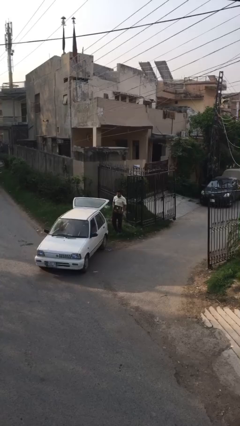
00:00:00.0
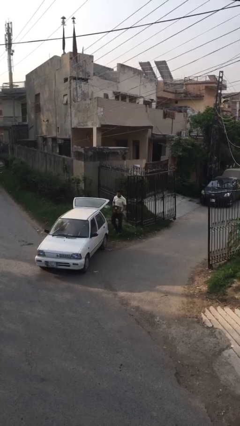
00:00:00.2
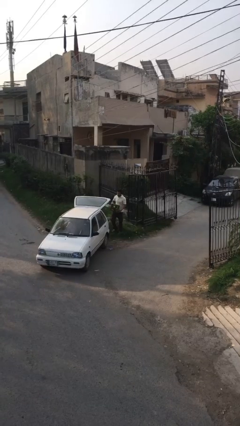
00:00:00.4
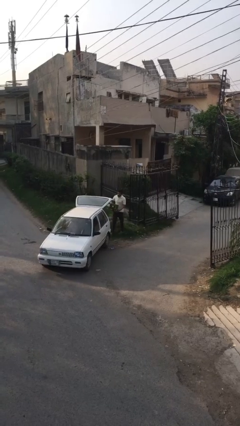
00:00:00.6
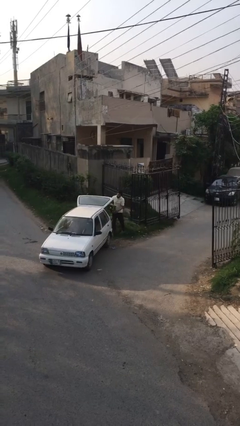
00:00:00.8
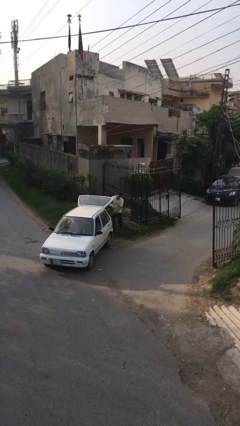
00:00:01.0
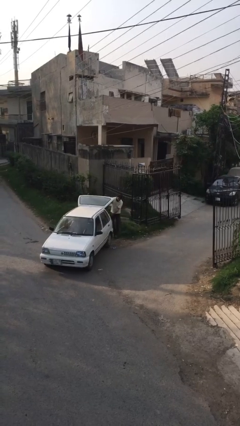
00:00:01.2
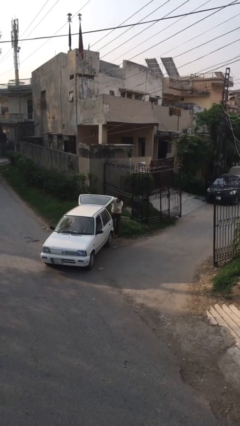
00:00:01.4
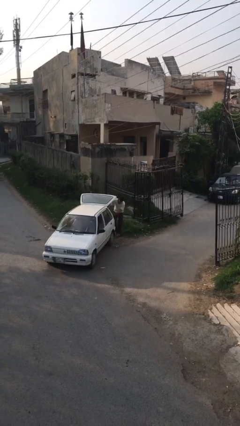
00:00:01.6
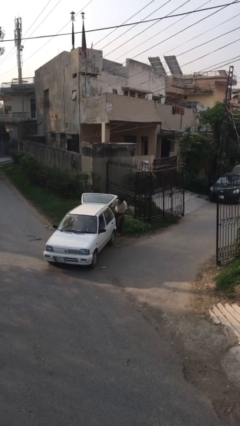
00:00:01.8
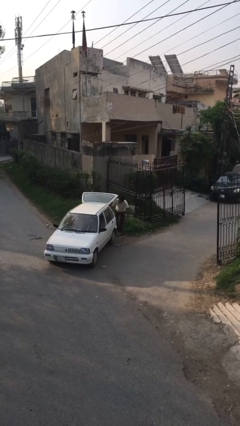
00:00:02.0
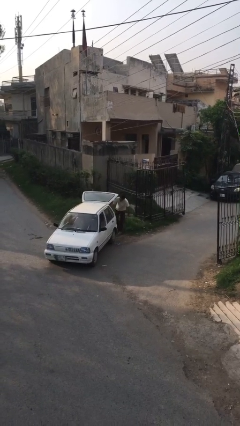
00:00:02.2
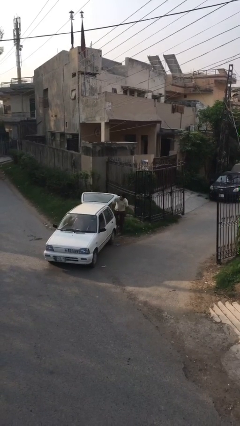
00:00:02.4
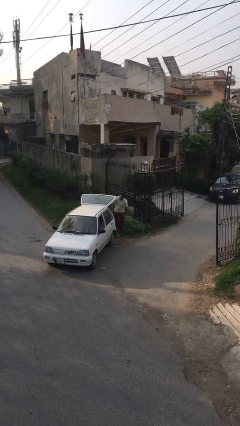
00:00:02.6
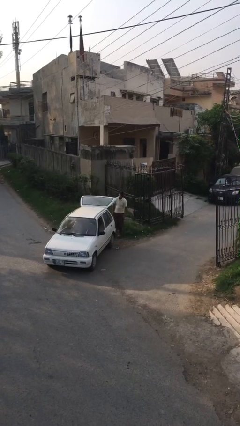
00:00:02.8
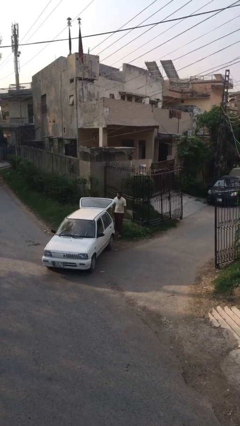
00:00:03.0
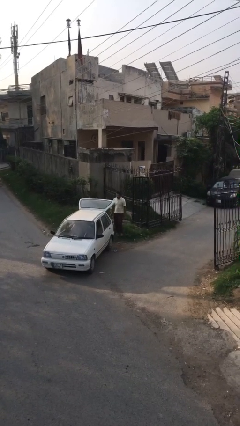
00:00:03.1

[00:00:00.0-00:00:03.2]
person loads car

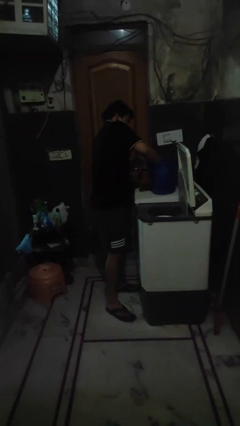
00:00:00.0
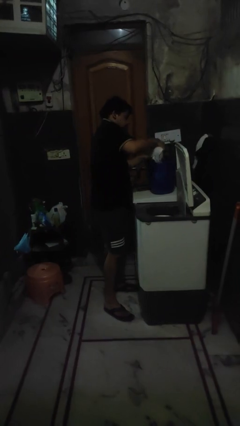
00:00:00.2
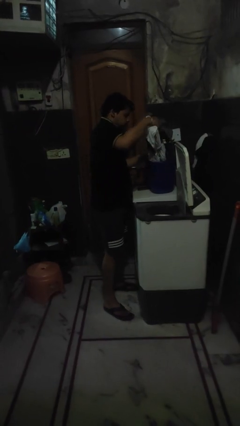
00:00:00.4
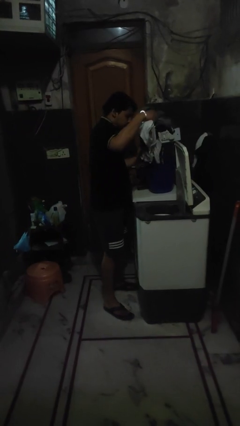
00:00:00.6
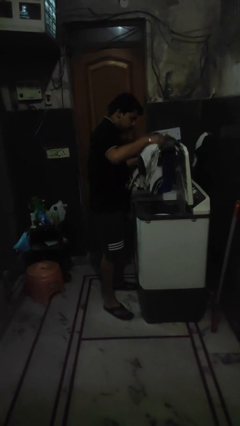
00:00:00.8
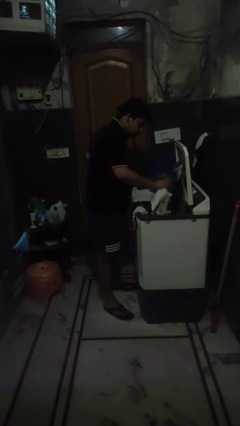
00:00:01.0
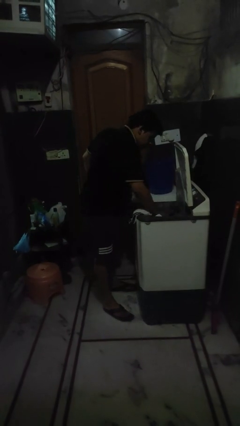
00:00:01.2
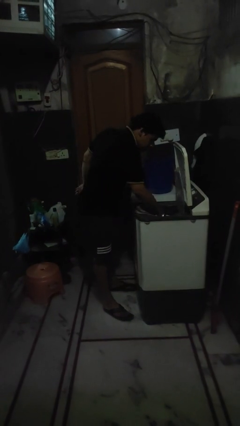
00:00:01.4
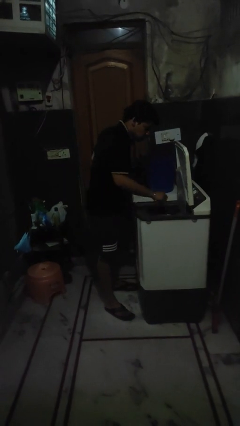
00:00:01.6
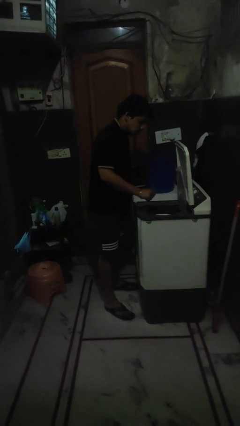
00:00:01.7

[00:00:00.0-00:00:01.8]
person loads clotheswasher

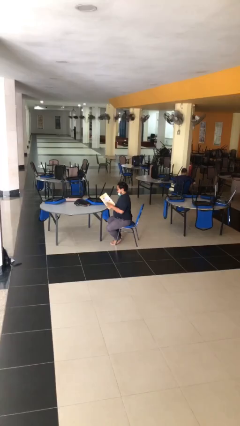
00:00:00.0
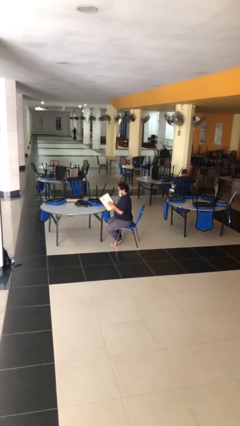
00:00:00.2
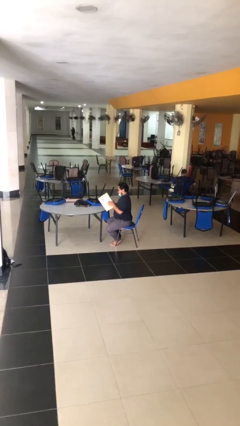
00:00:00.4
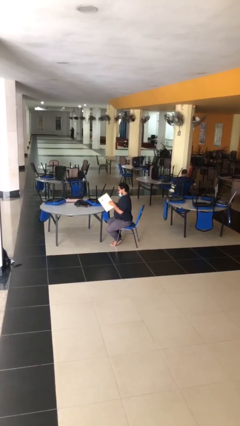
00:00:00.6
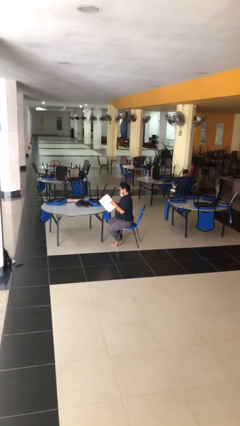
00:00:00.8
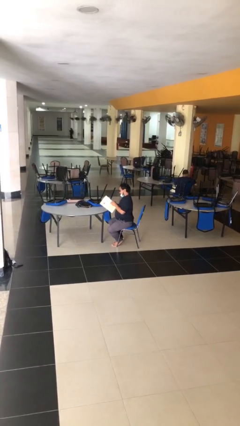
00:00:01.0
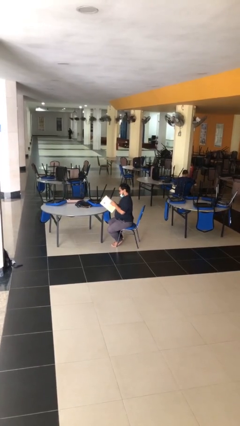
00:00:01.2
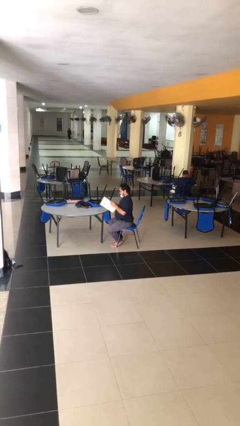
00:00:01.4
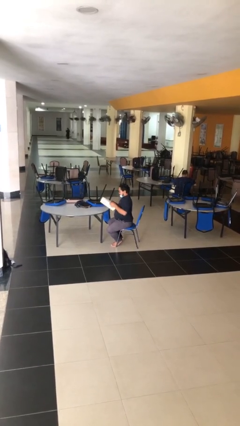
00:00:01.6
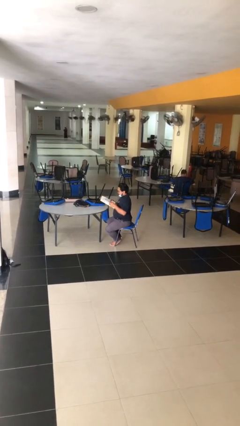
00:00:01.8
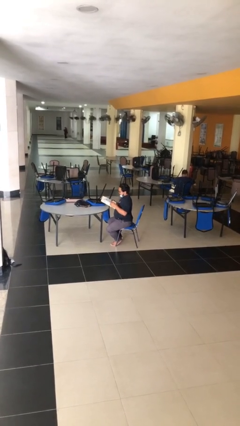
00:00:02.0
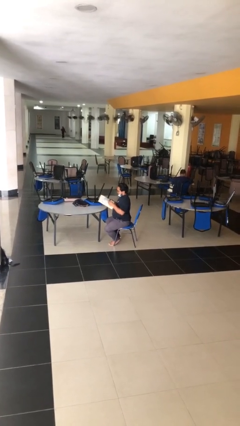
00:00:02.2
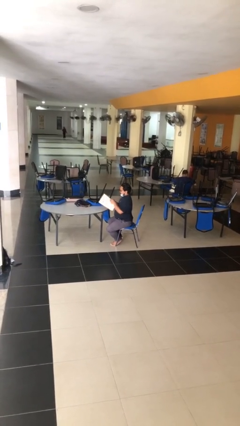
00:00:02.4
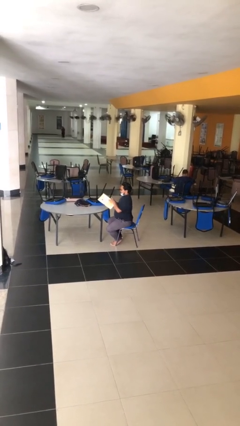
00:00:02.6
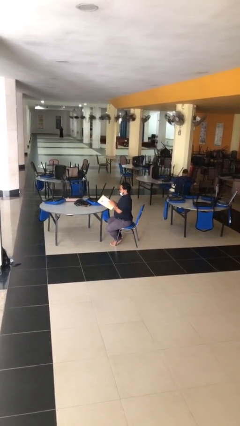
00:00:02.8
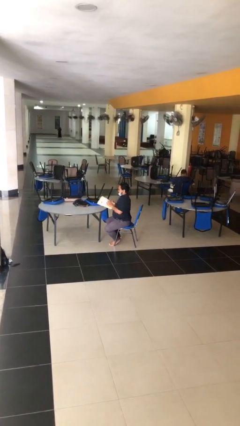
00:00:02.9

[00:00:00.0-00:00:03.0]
person reads document

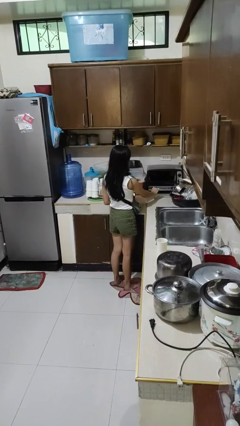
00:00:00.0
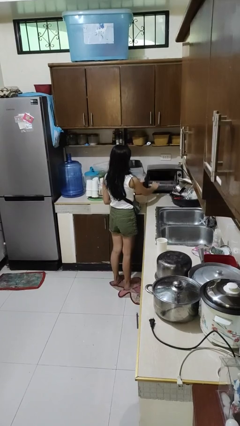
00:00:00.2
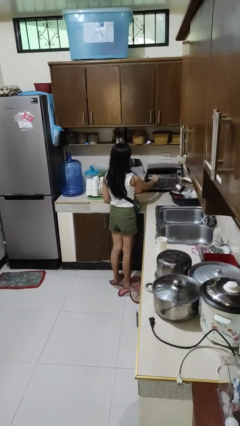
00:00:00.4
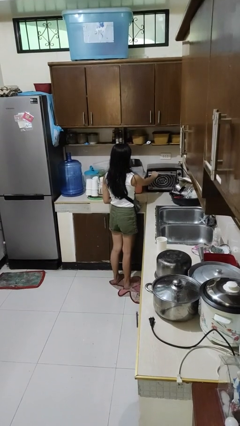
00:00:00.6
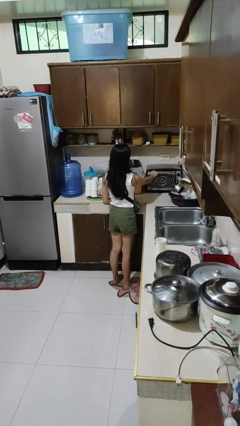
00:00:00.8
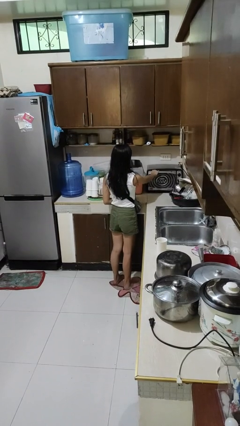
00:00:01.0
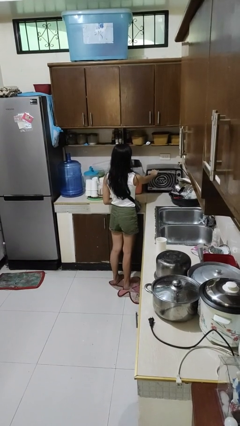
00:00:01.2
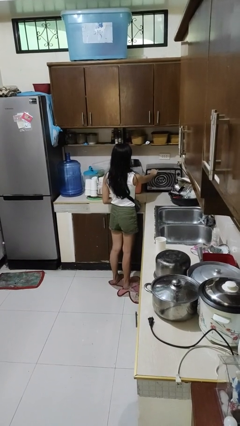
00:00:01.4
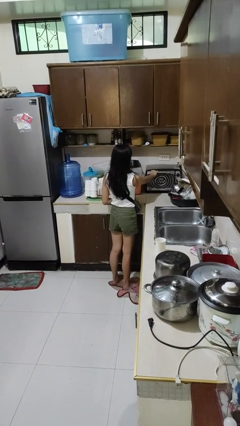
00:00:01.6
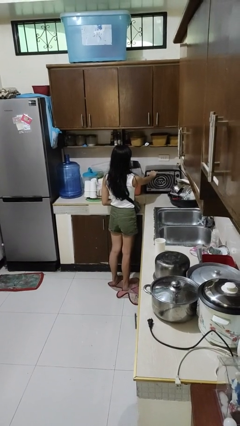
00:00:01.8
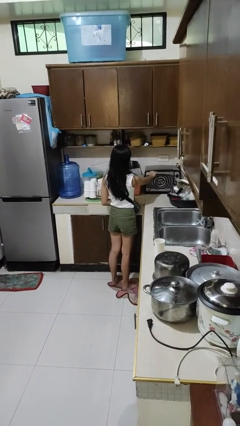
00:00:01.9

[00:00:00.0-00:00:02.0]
person closes microwave

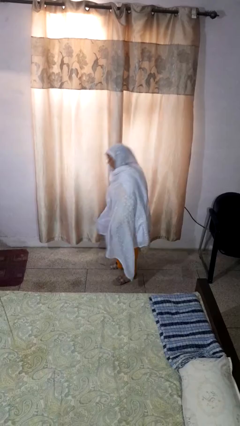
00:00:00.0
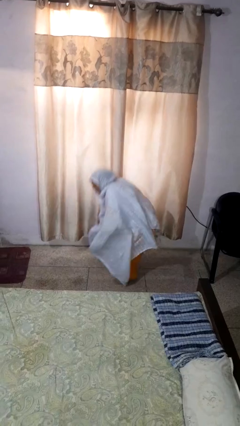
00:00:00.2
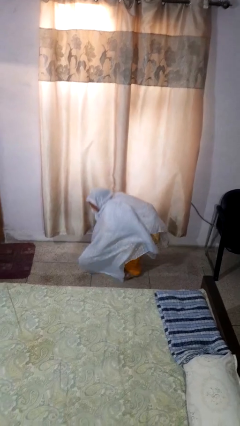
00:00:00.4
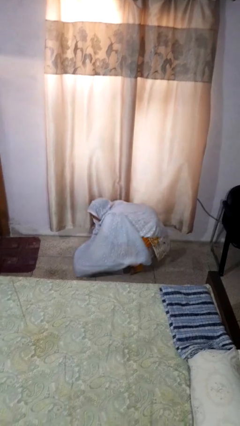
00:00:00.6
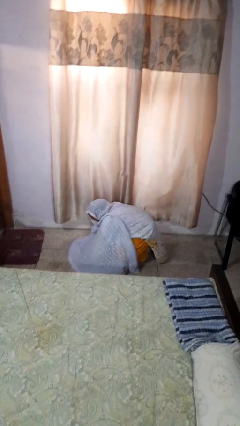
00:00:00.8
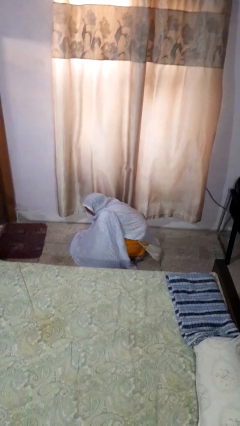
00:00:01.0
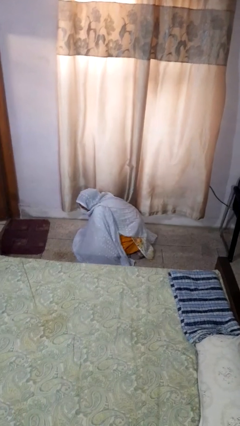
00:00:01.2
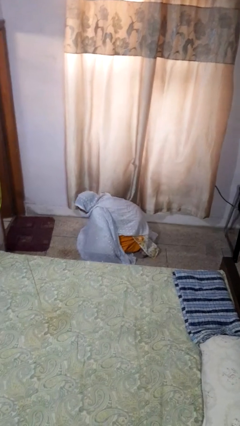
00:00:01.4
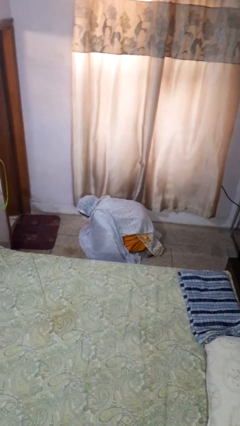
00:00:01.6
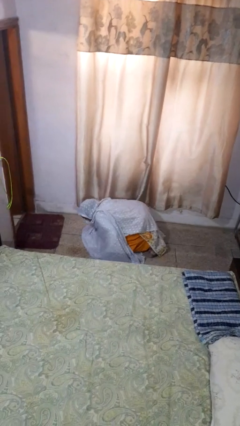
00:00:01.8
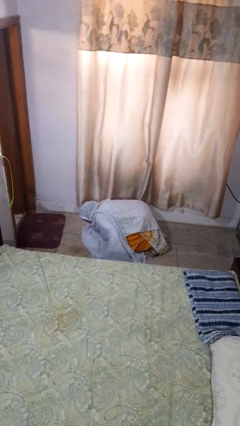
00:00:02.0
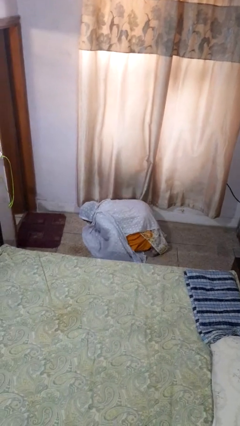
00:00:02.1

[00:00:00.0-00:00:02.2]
person falls while standing

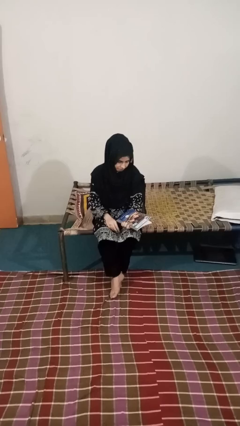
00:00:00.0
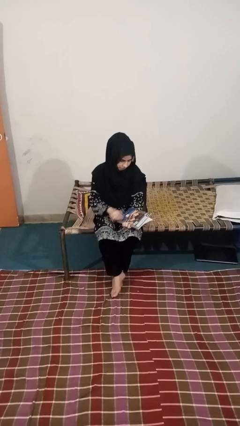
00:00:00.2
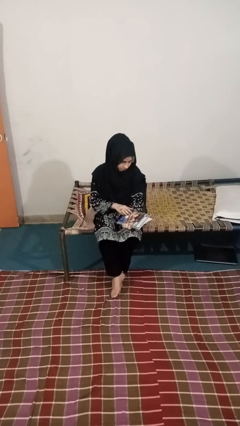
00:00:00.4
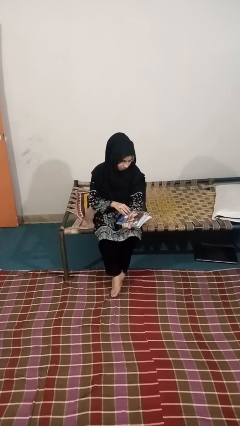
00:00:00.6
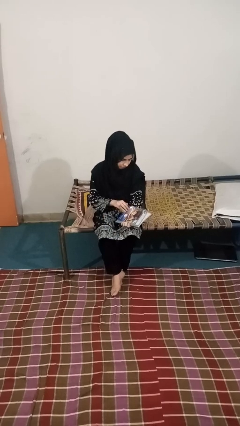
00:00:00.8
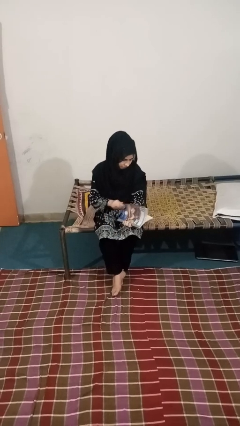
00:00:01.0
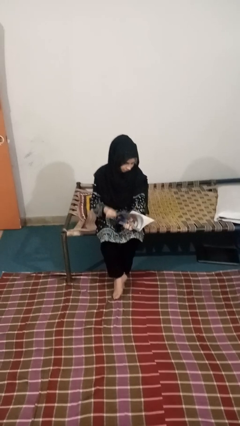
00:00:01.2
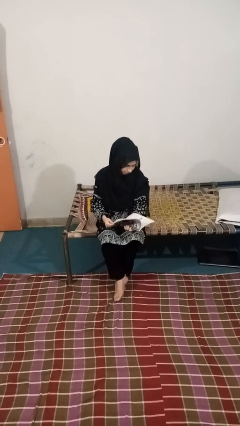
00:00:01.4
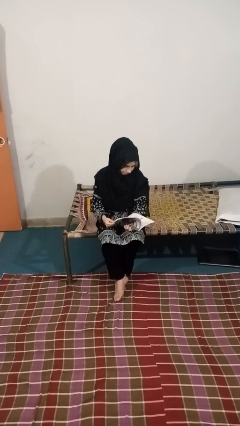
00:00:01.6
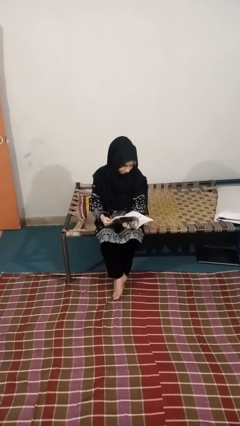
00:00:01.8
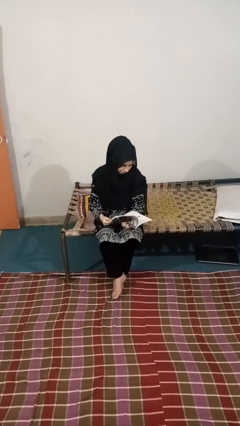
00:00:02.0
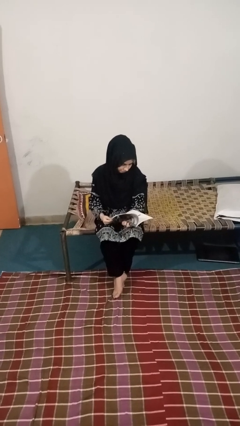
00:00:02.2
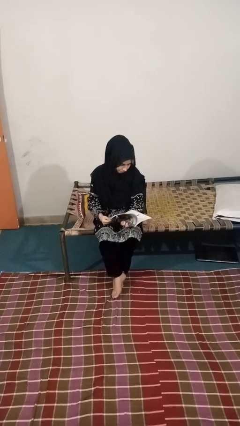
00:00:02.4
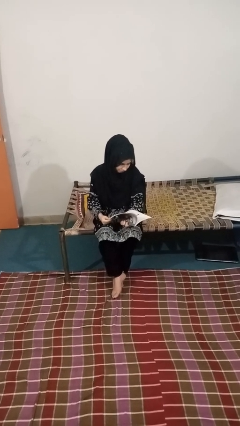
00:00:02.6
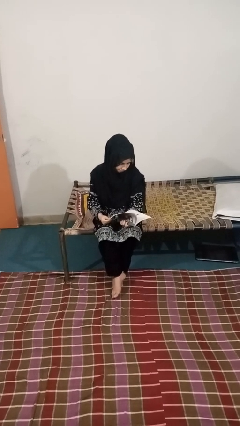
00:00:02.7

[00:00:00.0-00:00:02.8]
person reads book

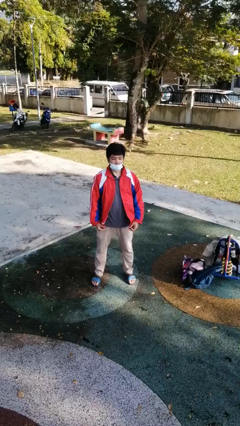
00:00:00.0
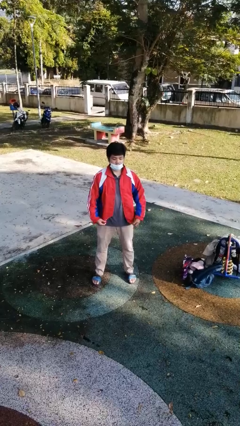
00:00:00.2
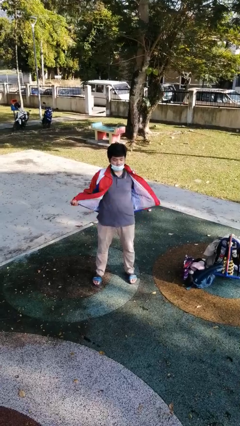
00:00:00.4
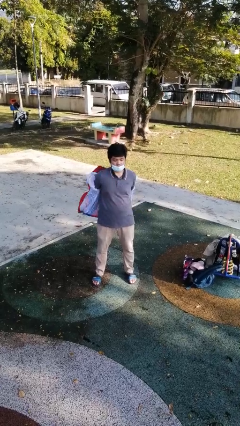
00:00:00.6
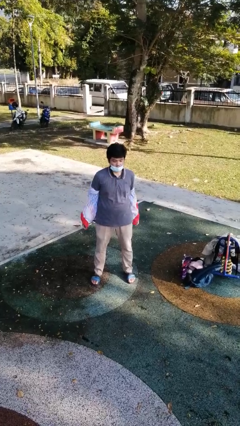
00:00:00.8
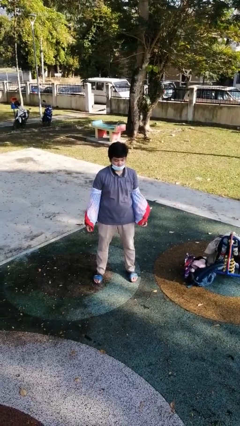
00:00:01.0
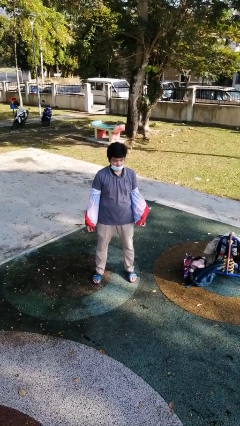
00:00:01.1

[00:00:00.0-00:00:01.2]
person takes off jacket

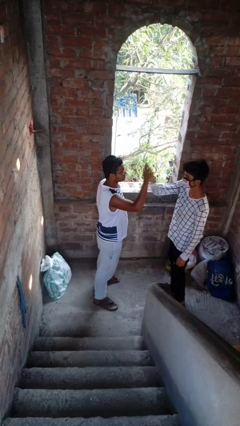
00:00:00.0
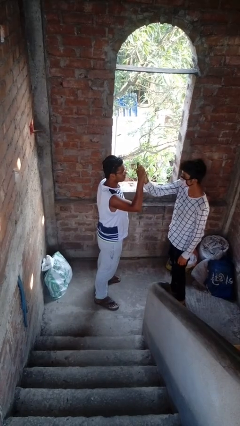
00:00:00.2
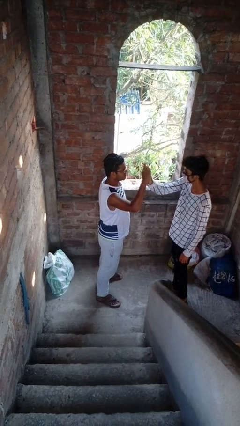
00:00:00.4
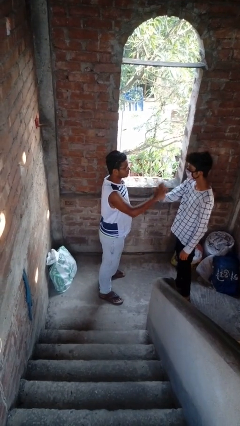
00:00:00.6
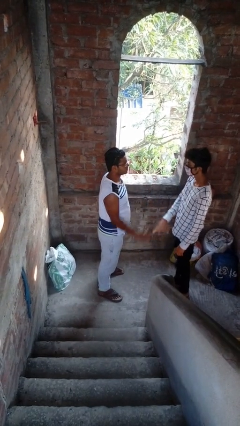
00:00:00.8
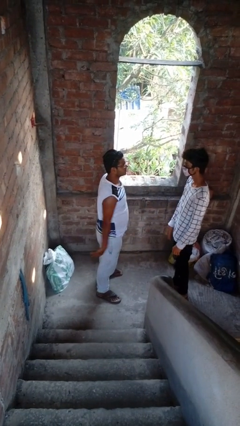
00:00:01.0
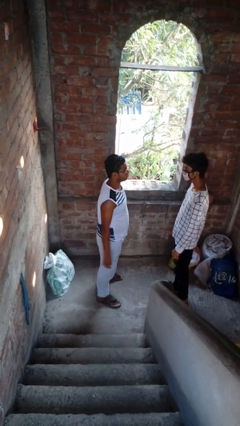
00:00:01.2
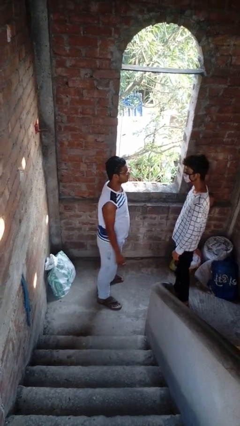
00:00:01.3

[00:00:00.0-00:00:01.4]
person highfives hand
